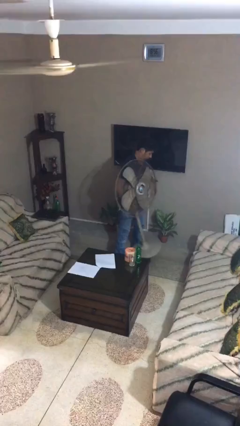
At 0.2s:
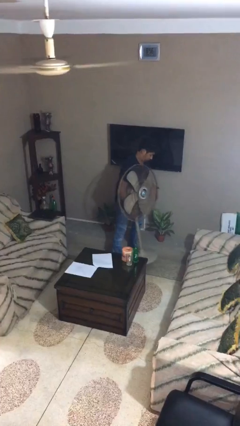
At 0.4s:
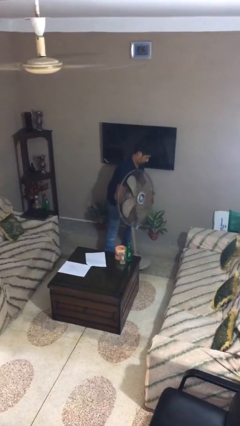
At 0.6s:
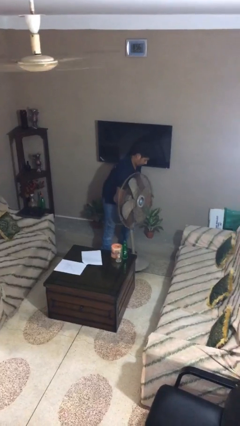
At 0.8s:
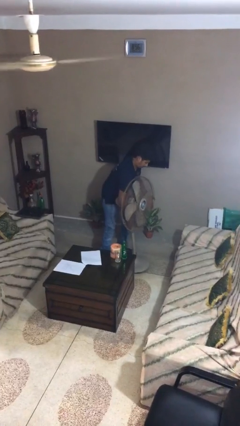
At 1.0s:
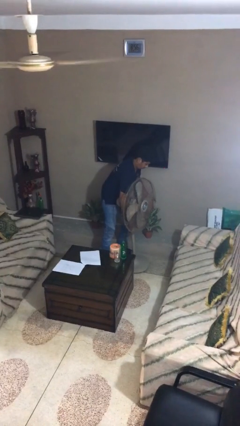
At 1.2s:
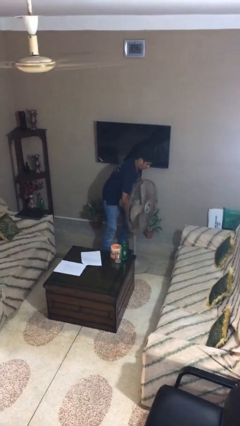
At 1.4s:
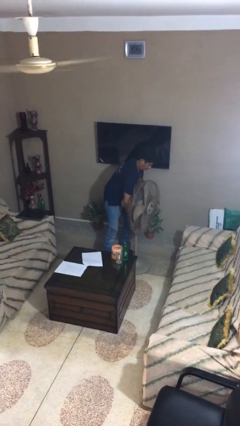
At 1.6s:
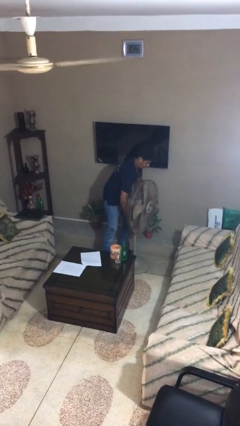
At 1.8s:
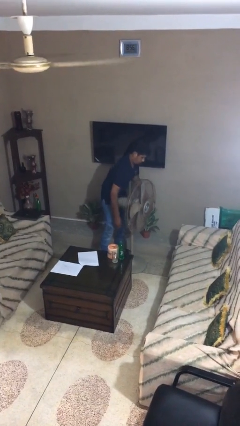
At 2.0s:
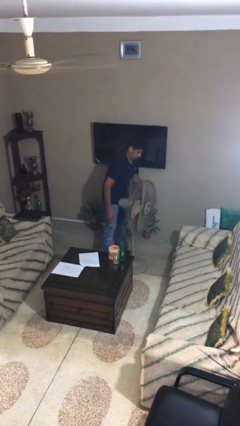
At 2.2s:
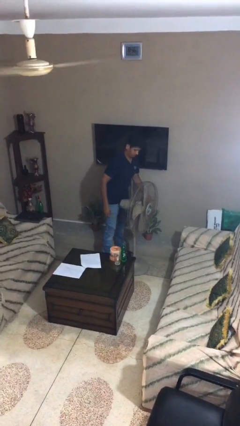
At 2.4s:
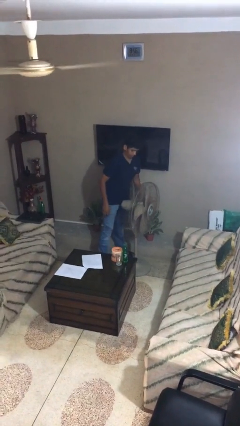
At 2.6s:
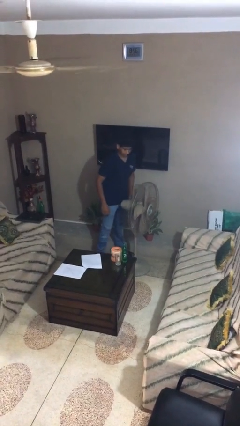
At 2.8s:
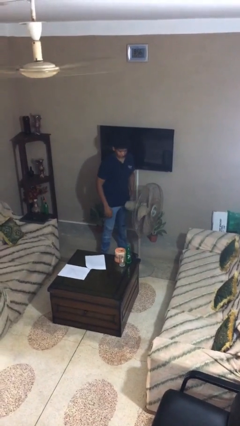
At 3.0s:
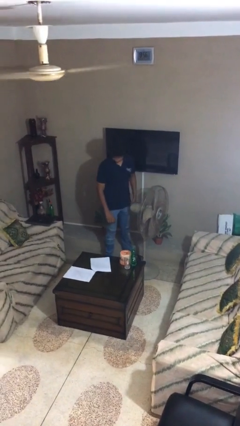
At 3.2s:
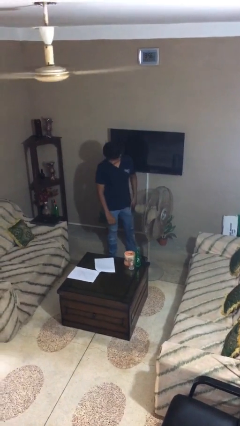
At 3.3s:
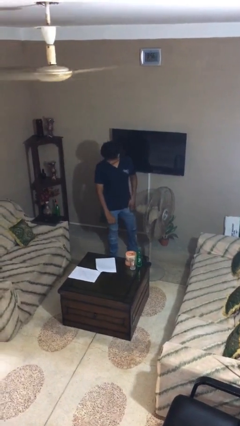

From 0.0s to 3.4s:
person puts down object on floor

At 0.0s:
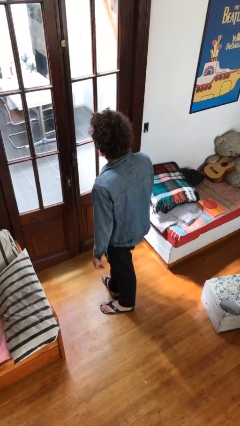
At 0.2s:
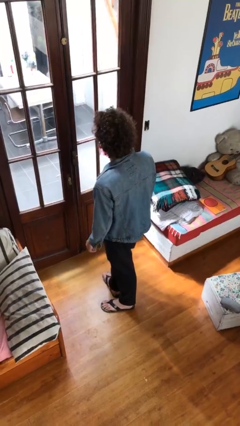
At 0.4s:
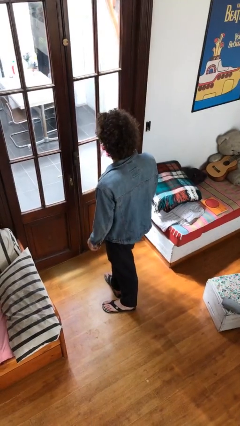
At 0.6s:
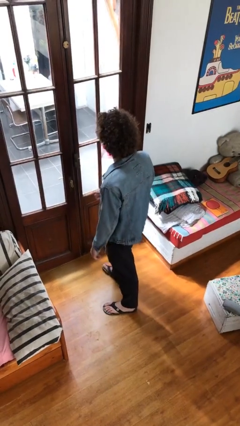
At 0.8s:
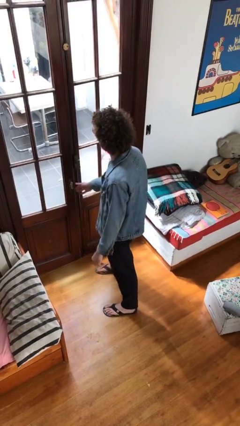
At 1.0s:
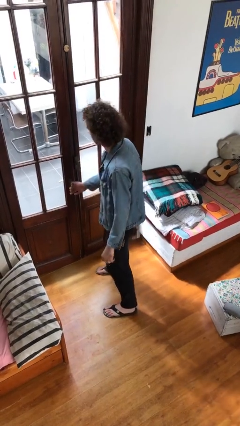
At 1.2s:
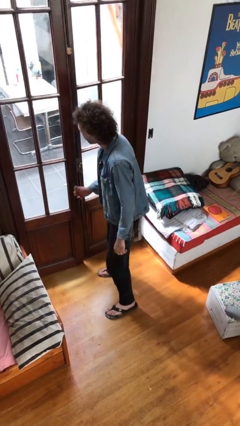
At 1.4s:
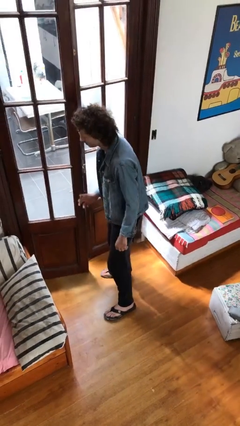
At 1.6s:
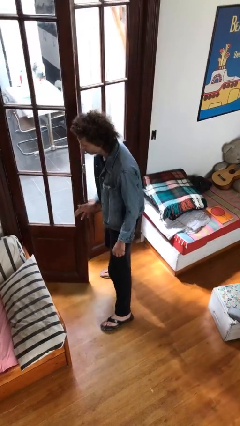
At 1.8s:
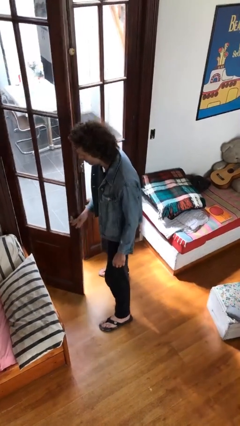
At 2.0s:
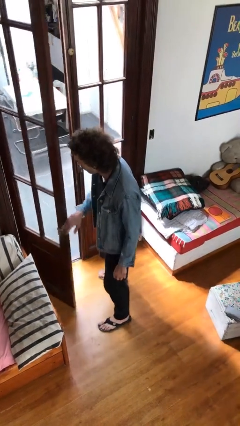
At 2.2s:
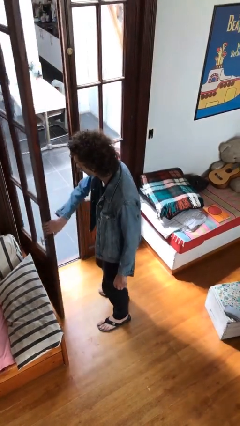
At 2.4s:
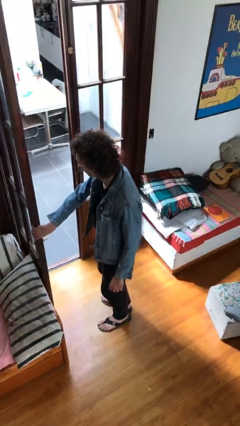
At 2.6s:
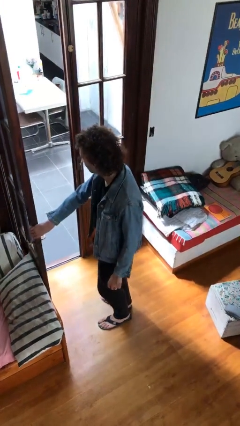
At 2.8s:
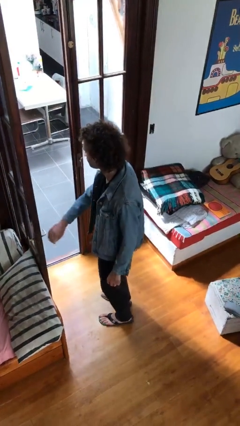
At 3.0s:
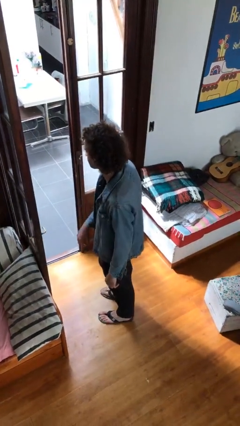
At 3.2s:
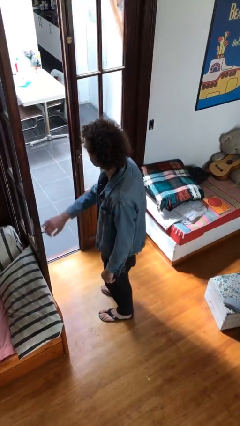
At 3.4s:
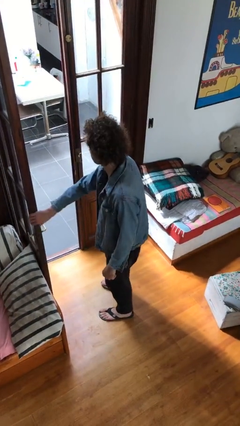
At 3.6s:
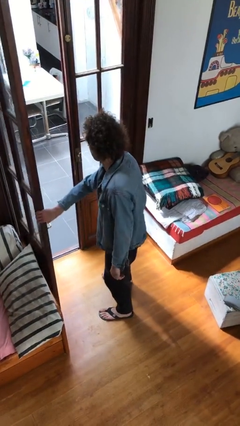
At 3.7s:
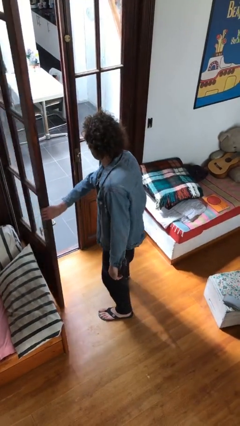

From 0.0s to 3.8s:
person opens facility door

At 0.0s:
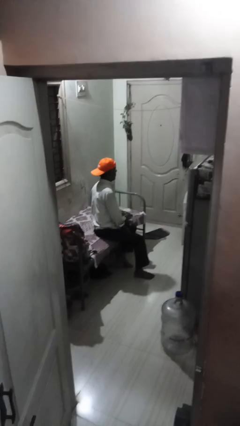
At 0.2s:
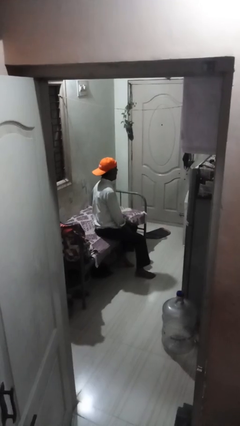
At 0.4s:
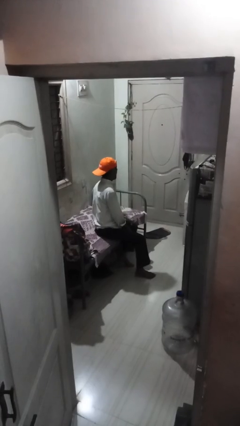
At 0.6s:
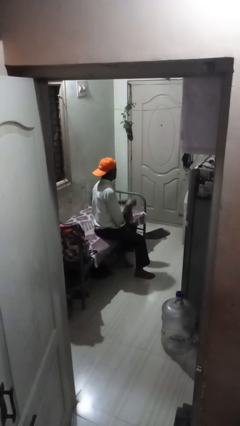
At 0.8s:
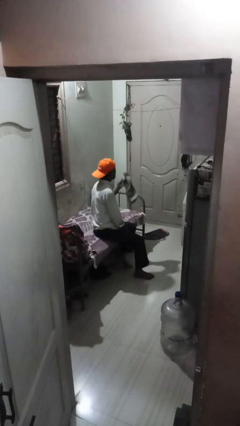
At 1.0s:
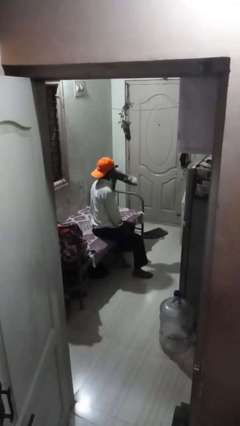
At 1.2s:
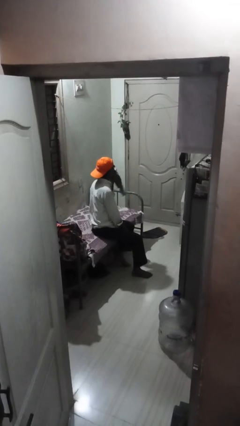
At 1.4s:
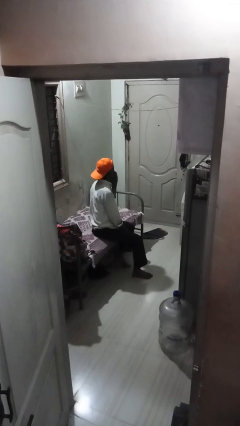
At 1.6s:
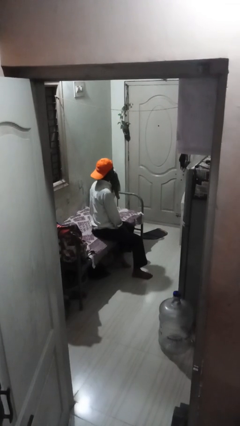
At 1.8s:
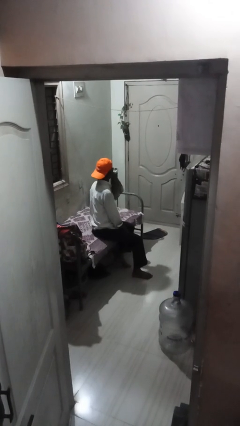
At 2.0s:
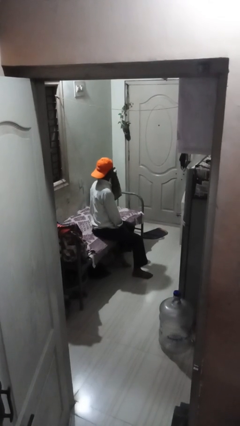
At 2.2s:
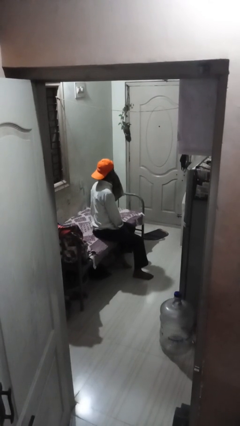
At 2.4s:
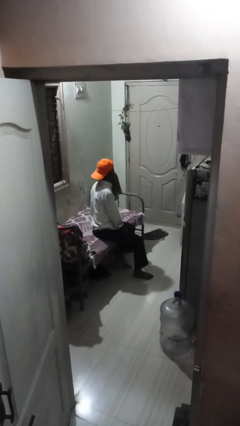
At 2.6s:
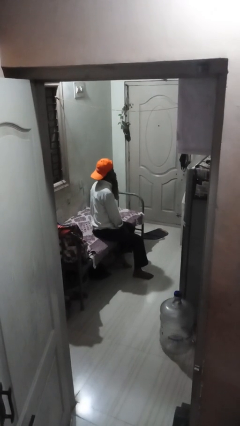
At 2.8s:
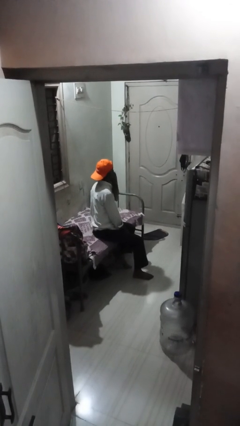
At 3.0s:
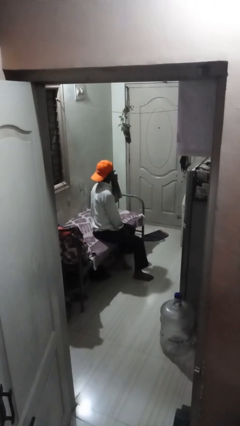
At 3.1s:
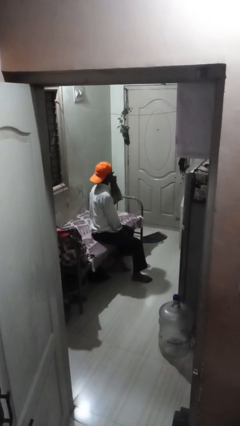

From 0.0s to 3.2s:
person wipes mouth with napkin

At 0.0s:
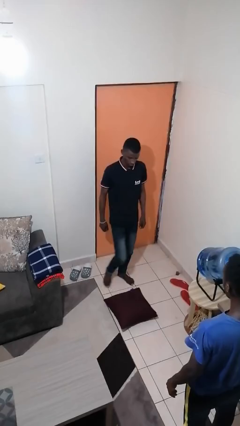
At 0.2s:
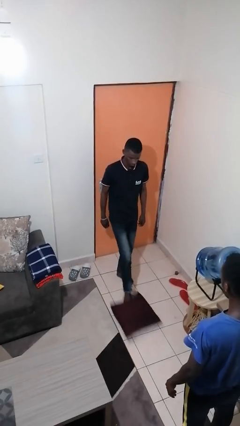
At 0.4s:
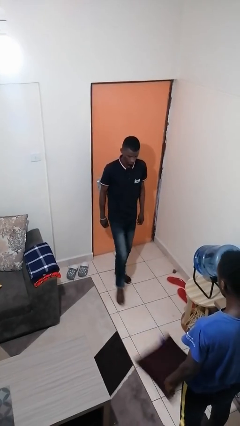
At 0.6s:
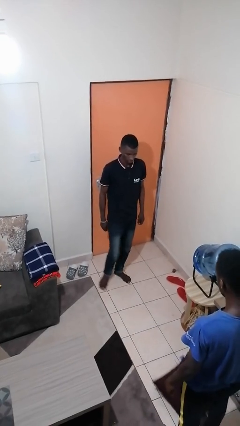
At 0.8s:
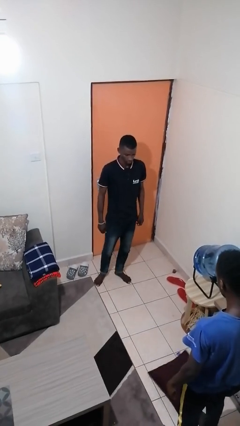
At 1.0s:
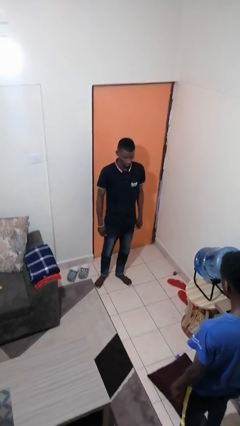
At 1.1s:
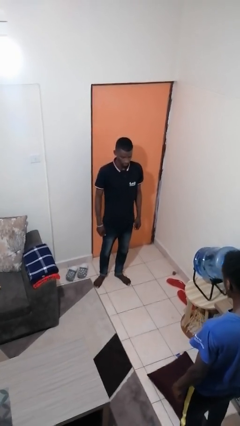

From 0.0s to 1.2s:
person kicks object to person

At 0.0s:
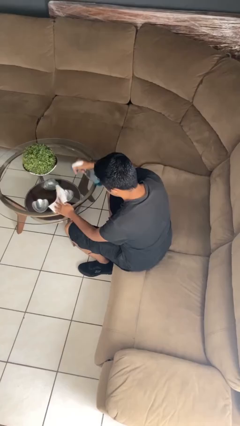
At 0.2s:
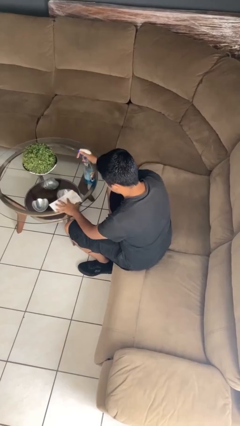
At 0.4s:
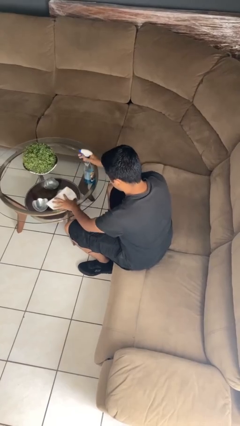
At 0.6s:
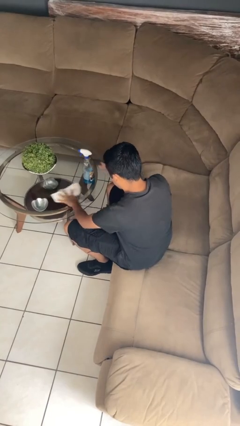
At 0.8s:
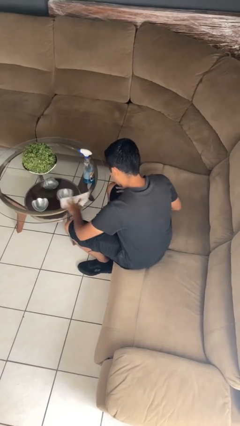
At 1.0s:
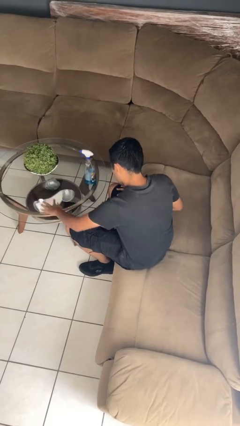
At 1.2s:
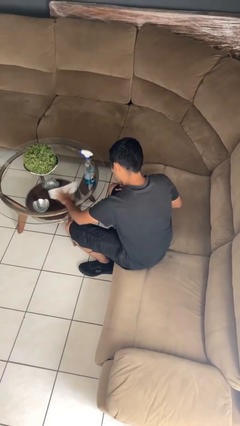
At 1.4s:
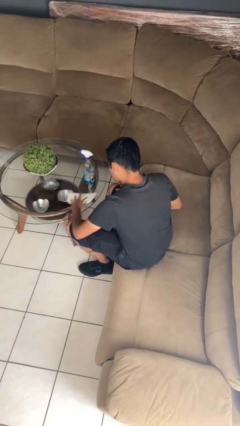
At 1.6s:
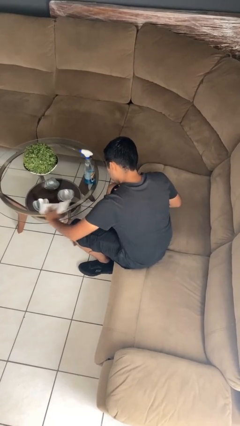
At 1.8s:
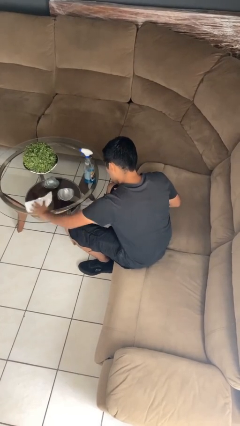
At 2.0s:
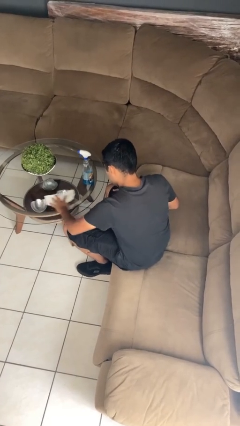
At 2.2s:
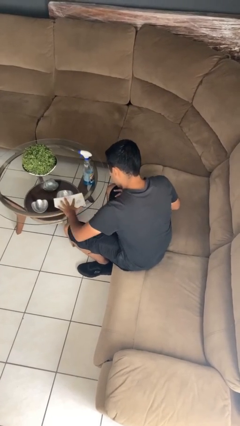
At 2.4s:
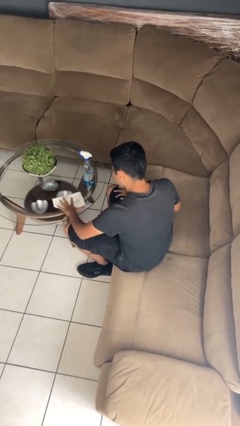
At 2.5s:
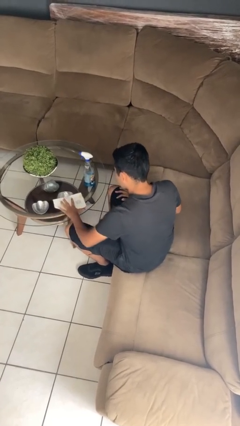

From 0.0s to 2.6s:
person cleans table with rag

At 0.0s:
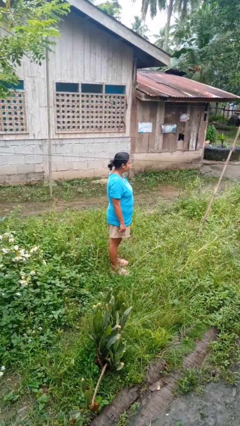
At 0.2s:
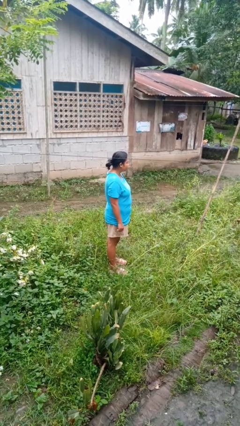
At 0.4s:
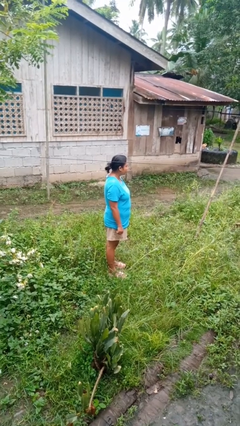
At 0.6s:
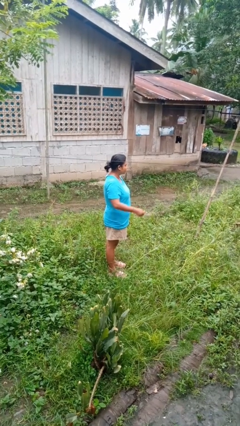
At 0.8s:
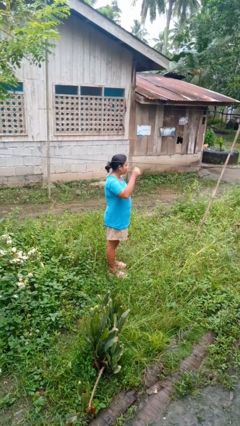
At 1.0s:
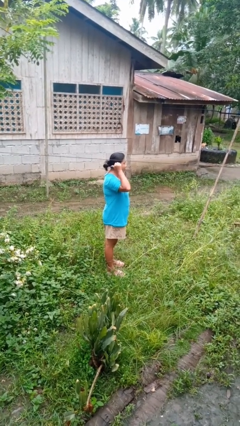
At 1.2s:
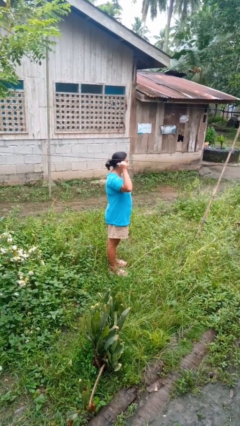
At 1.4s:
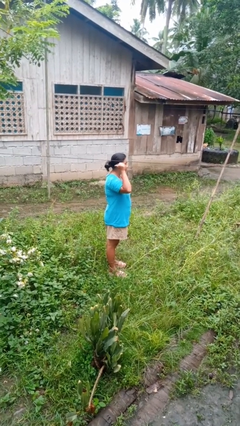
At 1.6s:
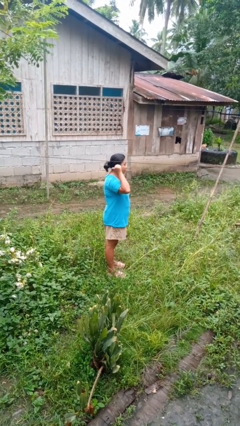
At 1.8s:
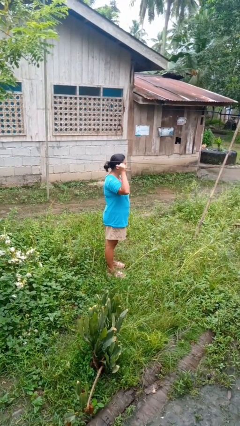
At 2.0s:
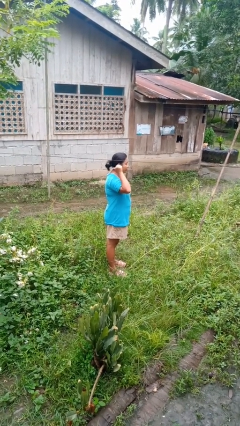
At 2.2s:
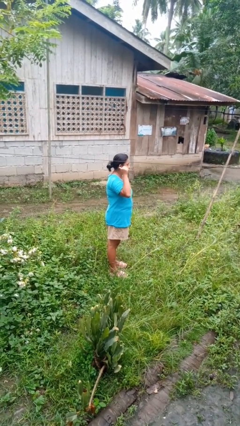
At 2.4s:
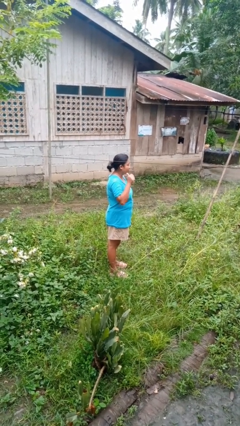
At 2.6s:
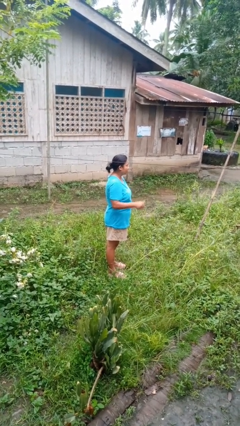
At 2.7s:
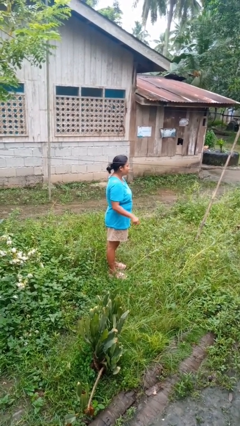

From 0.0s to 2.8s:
person gestures behind me

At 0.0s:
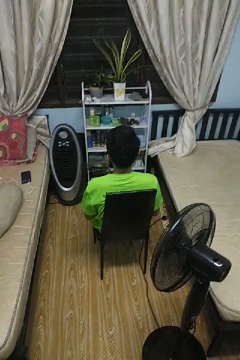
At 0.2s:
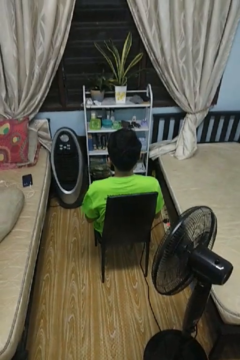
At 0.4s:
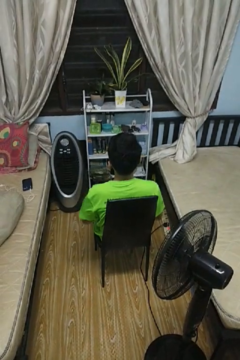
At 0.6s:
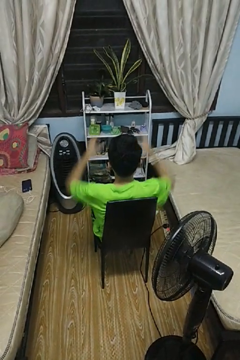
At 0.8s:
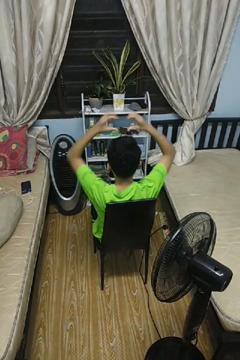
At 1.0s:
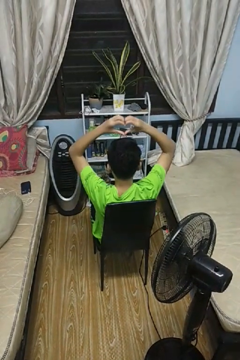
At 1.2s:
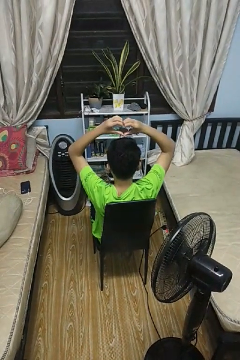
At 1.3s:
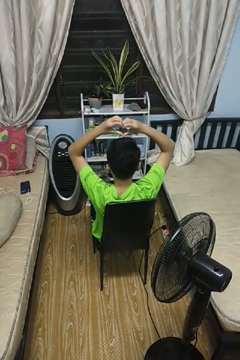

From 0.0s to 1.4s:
person gestures heart
